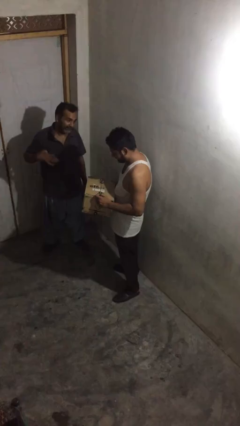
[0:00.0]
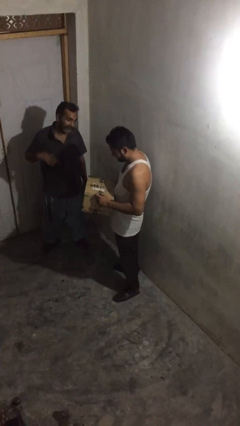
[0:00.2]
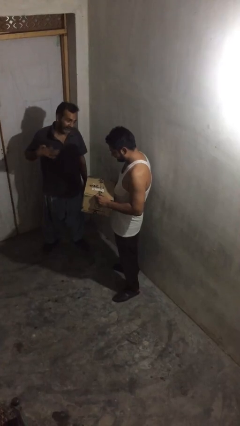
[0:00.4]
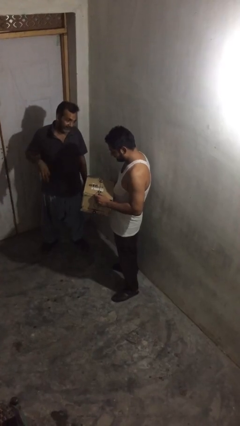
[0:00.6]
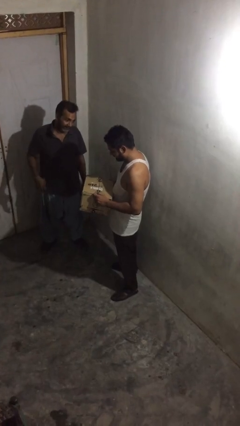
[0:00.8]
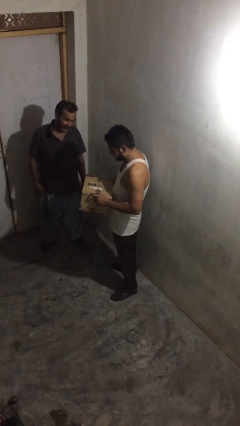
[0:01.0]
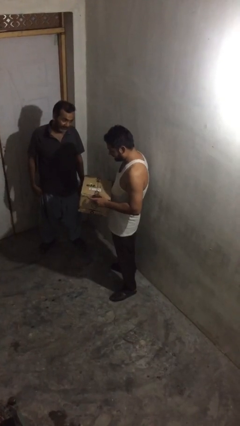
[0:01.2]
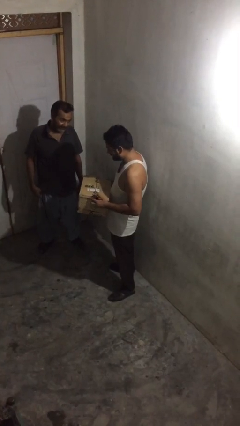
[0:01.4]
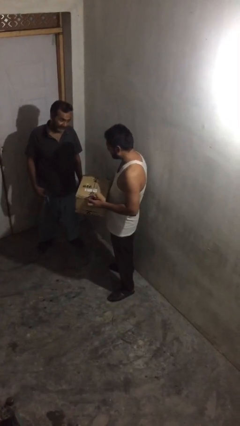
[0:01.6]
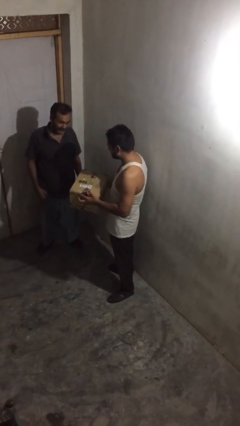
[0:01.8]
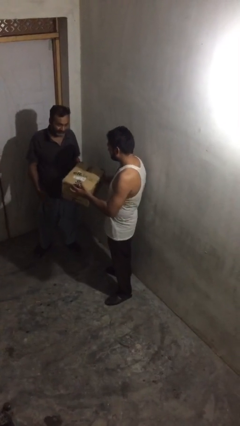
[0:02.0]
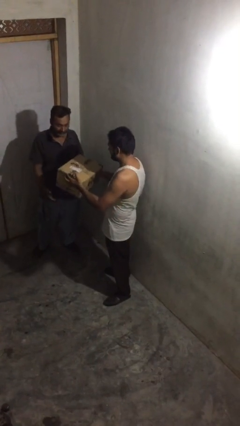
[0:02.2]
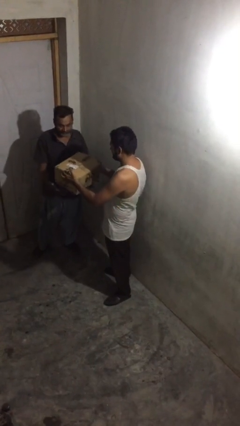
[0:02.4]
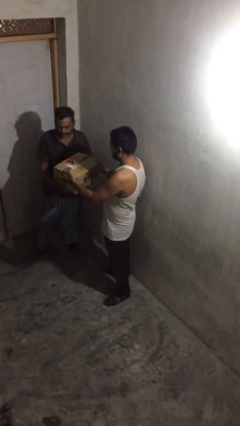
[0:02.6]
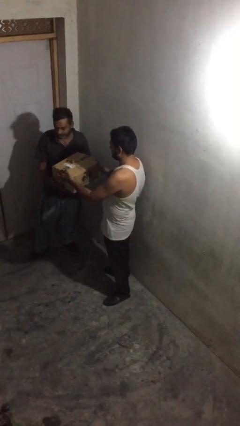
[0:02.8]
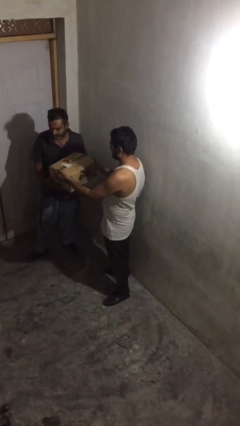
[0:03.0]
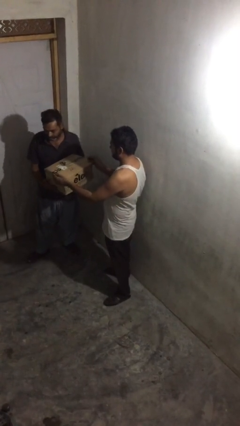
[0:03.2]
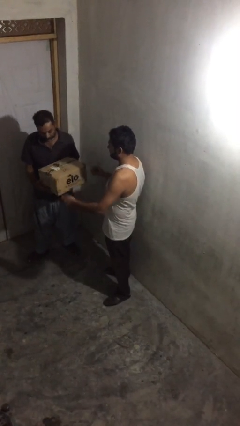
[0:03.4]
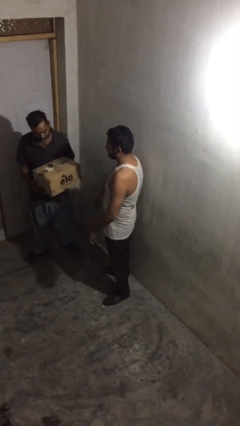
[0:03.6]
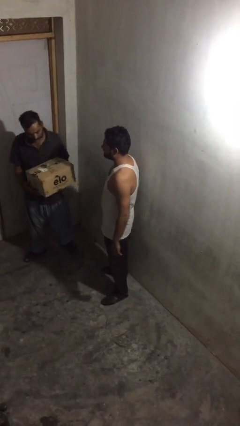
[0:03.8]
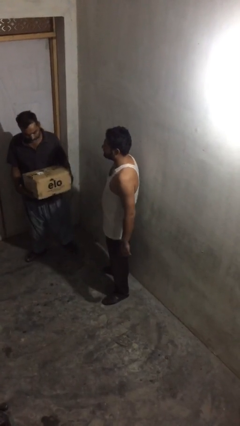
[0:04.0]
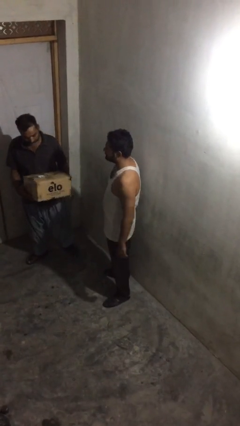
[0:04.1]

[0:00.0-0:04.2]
person transfers object to person

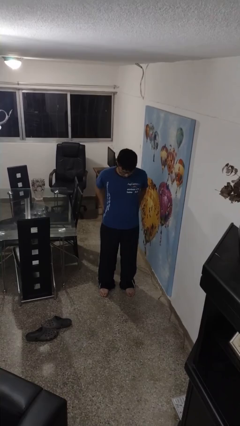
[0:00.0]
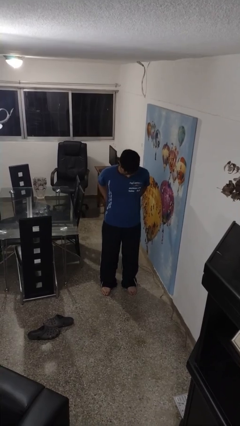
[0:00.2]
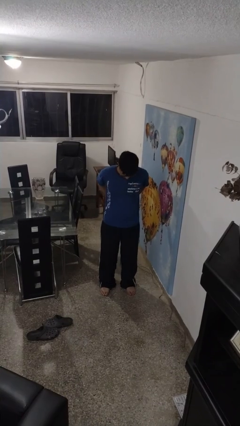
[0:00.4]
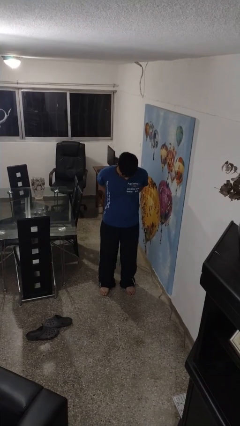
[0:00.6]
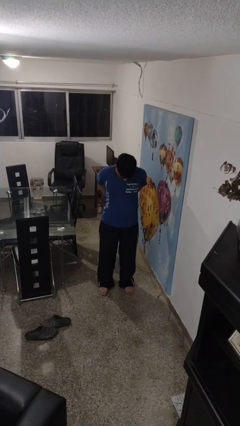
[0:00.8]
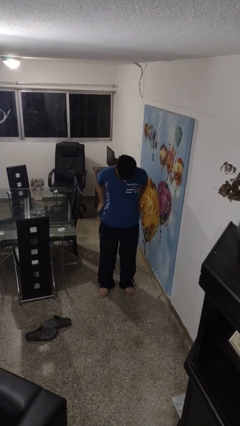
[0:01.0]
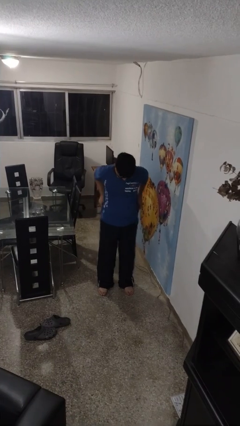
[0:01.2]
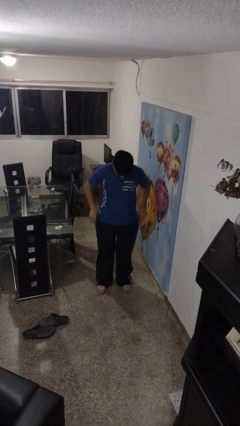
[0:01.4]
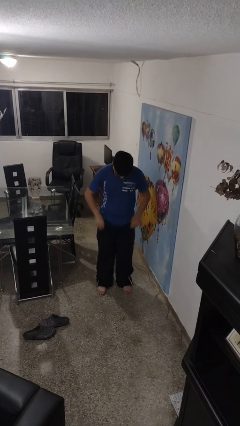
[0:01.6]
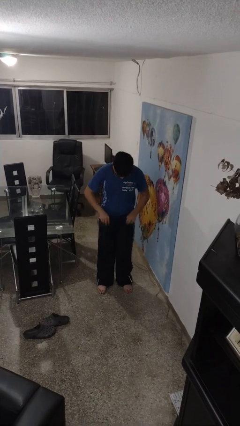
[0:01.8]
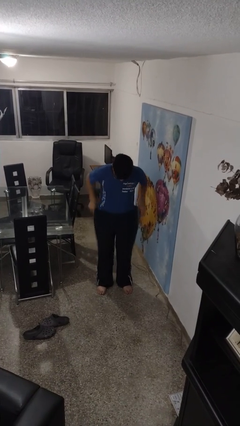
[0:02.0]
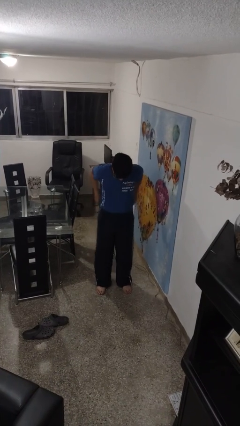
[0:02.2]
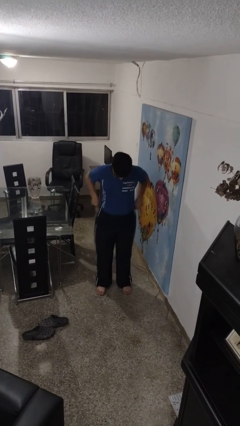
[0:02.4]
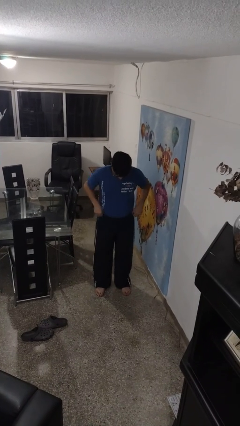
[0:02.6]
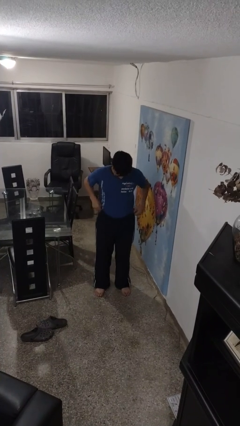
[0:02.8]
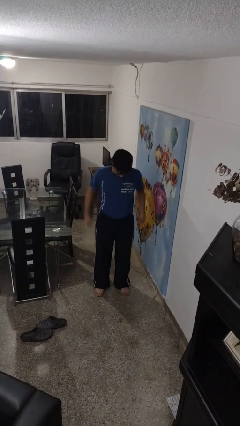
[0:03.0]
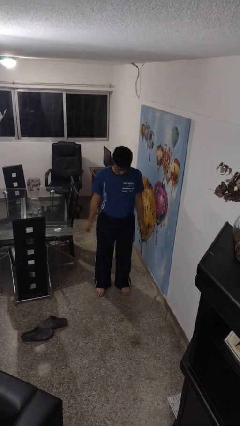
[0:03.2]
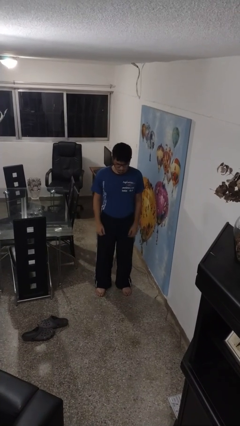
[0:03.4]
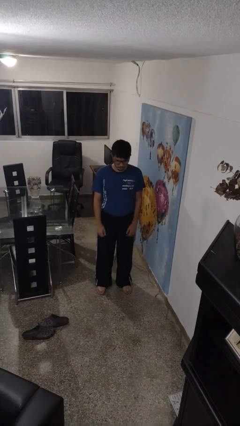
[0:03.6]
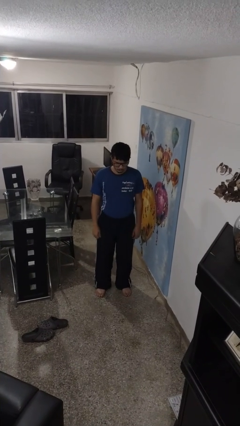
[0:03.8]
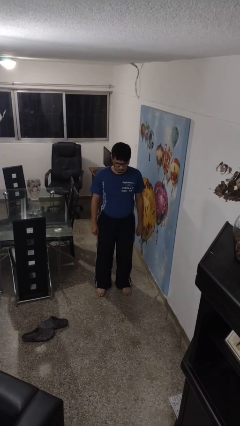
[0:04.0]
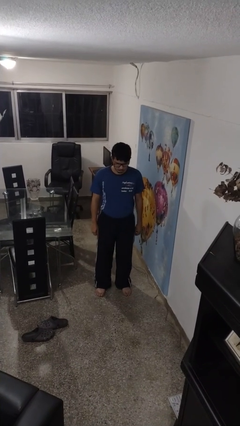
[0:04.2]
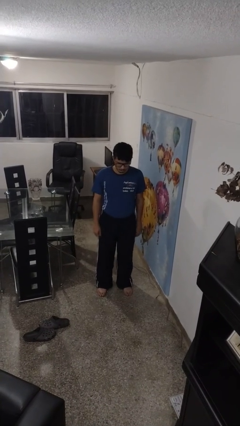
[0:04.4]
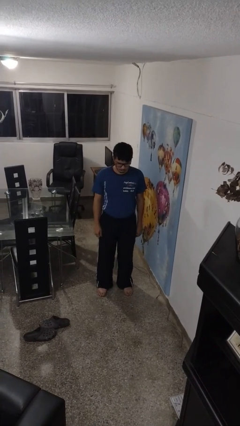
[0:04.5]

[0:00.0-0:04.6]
person tucks in shirt

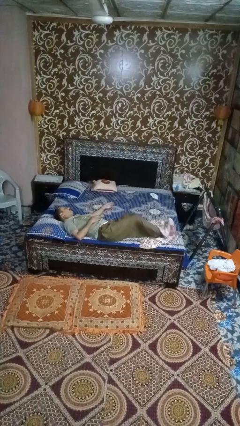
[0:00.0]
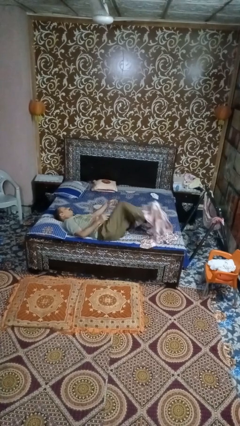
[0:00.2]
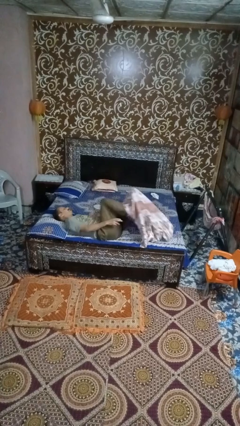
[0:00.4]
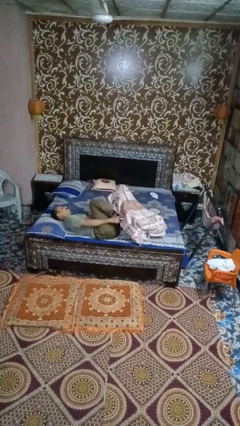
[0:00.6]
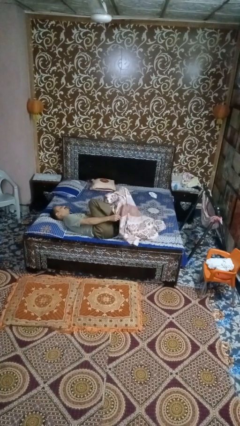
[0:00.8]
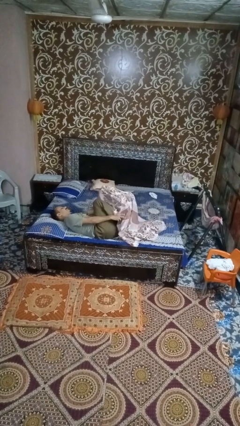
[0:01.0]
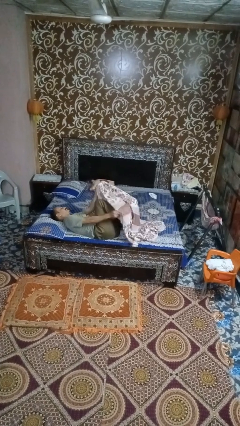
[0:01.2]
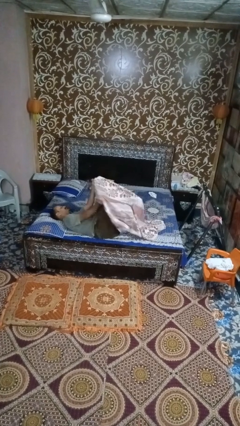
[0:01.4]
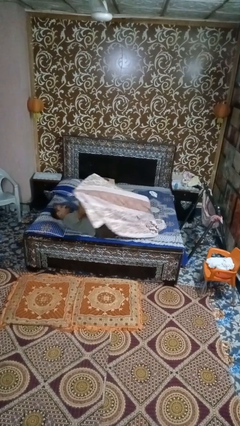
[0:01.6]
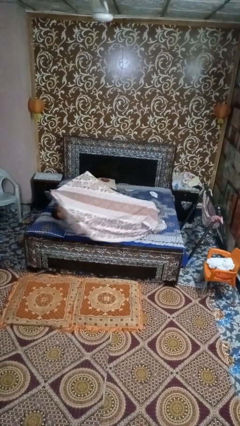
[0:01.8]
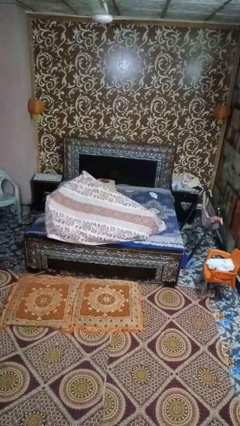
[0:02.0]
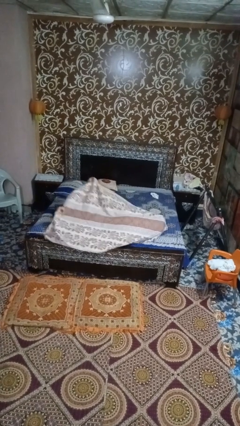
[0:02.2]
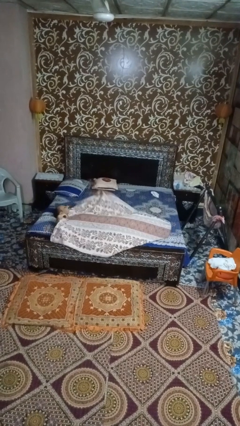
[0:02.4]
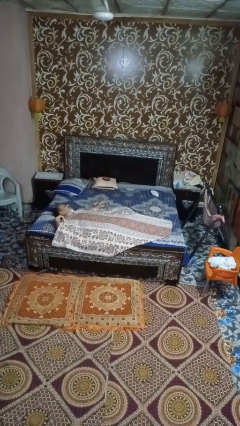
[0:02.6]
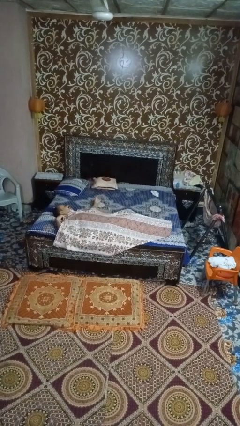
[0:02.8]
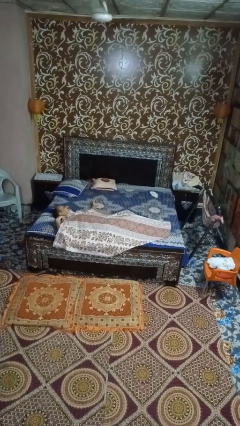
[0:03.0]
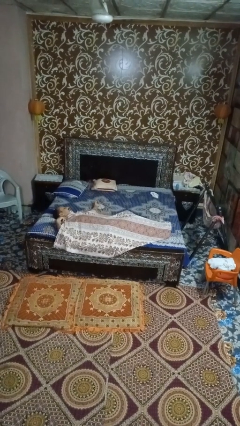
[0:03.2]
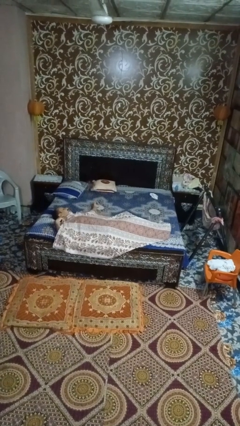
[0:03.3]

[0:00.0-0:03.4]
person covers with bedsheets

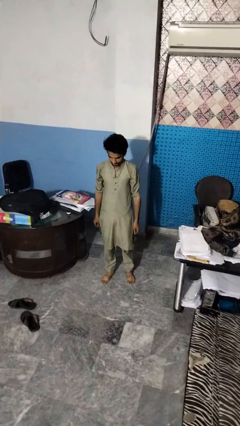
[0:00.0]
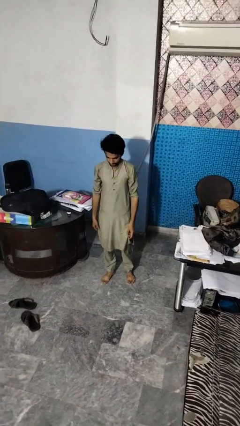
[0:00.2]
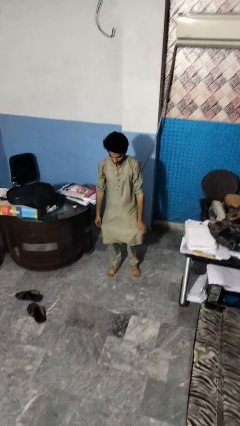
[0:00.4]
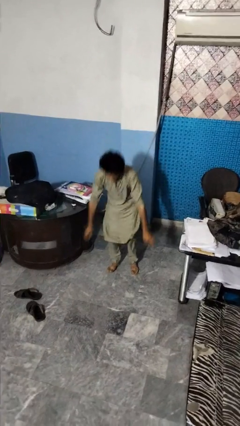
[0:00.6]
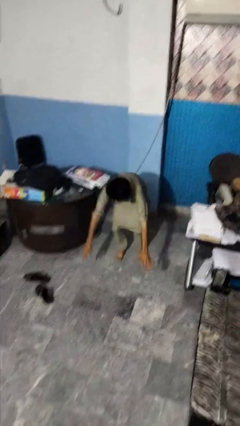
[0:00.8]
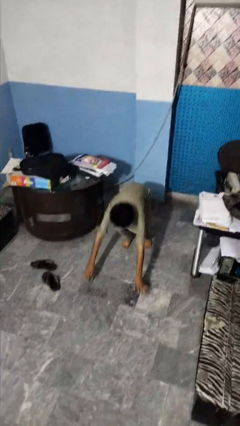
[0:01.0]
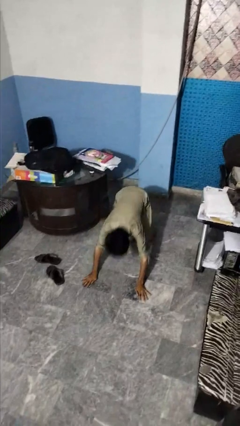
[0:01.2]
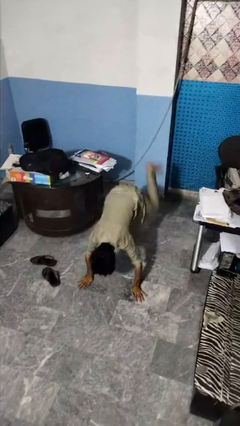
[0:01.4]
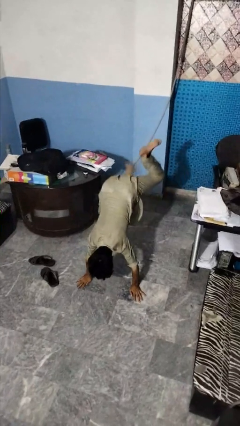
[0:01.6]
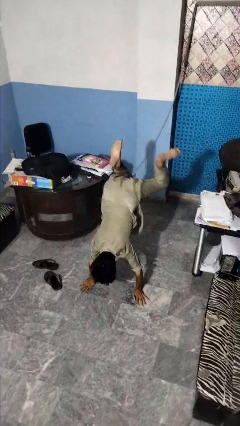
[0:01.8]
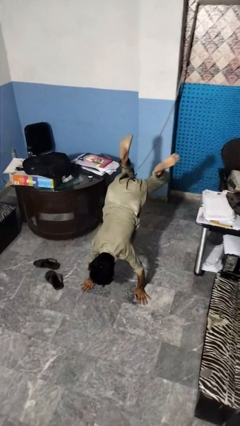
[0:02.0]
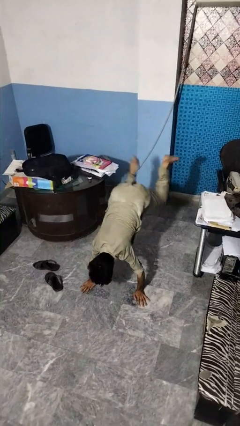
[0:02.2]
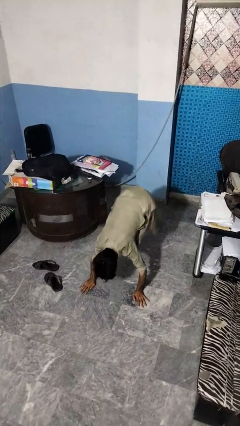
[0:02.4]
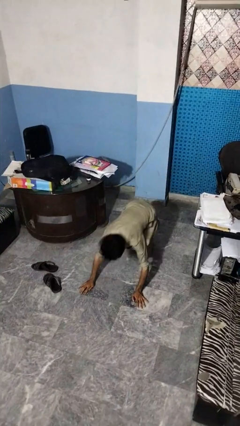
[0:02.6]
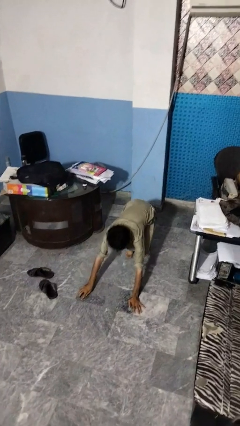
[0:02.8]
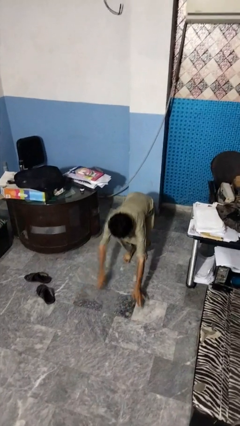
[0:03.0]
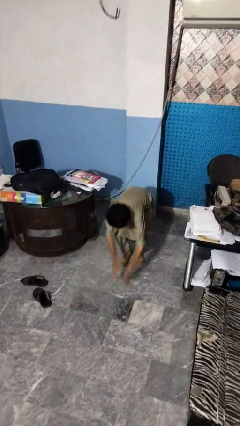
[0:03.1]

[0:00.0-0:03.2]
person handstand

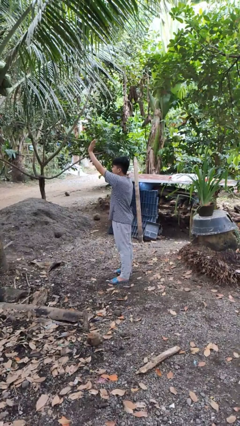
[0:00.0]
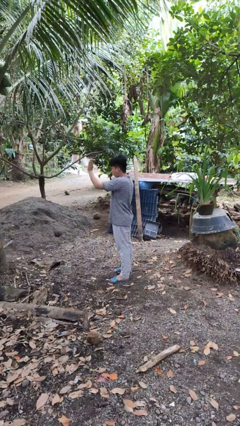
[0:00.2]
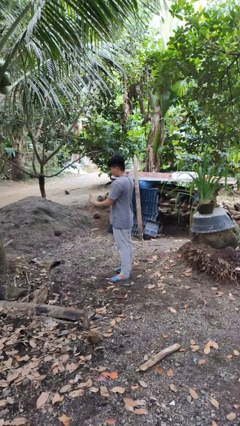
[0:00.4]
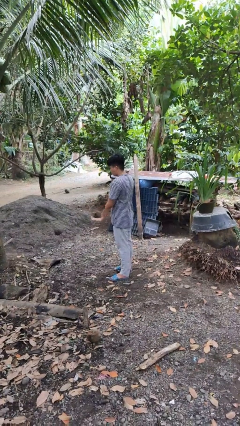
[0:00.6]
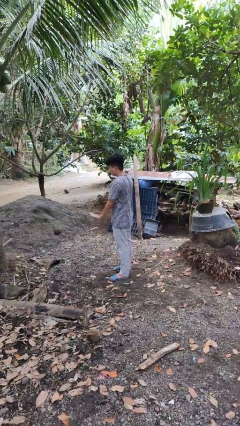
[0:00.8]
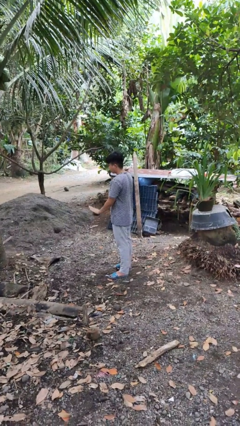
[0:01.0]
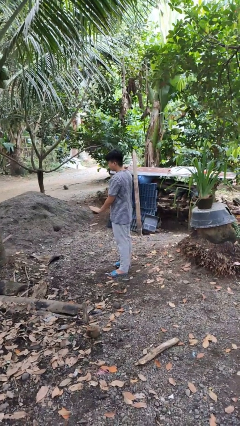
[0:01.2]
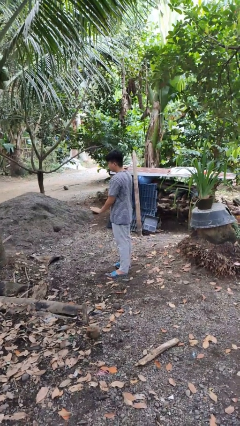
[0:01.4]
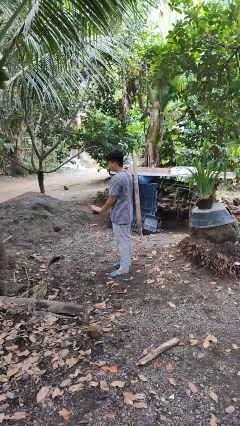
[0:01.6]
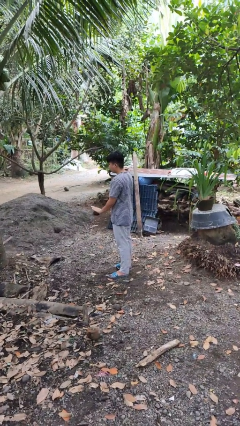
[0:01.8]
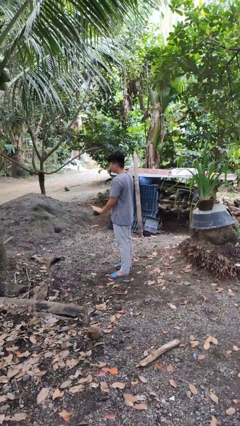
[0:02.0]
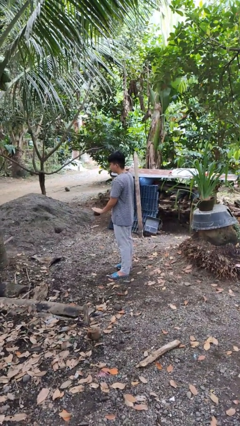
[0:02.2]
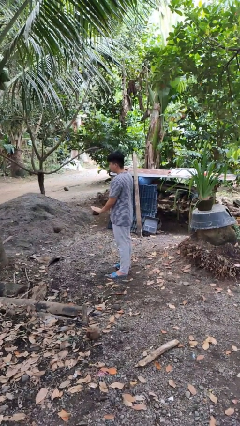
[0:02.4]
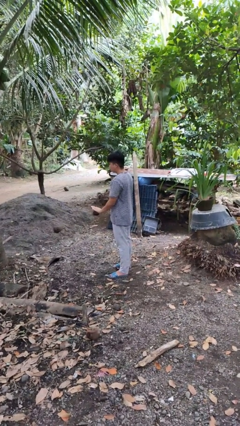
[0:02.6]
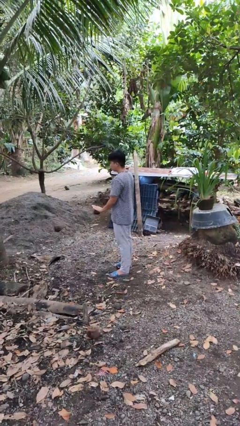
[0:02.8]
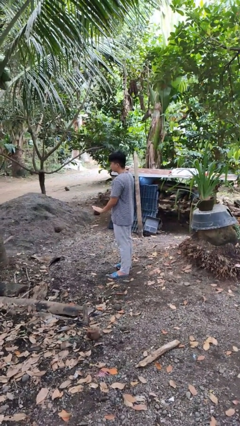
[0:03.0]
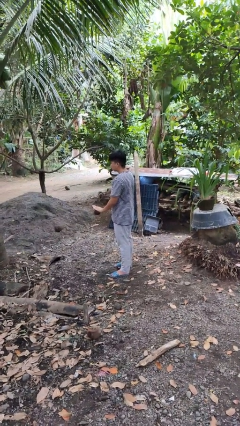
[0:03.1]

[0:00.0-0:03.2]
person gestures swipe down
